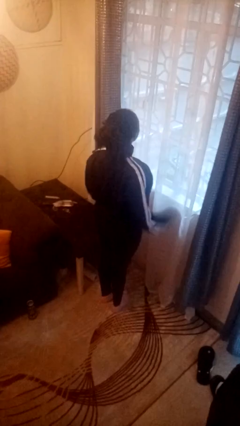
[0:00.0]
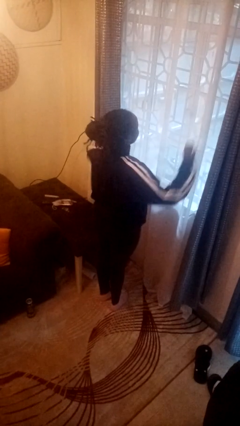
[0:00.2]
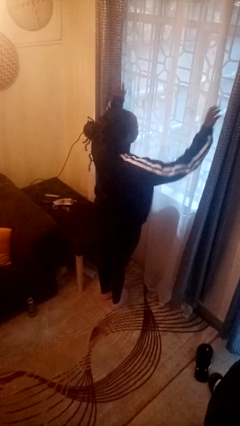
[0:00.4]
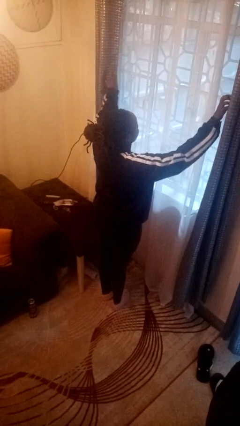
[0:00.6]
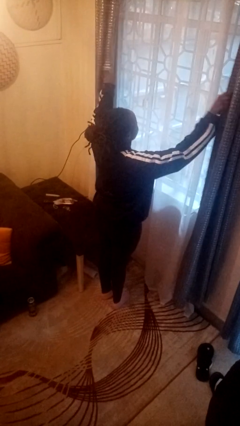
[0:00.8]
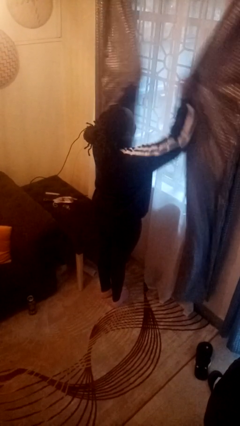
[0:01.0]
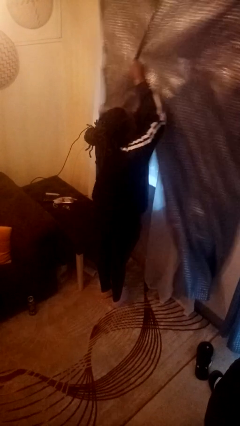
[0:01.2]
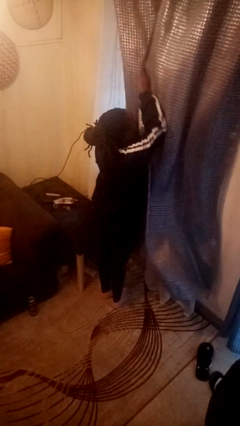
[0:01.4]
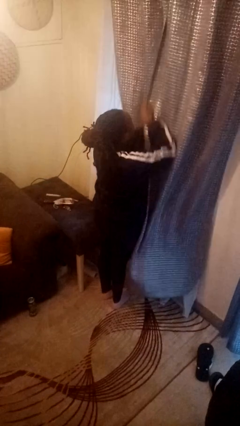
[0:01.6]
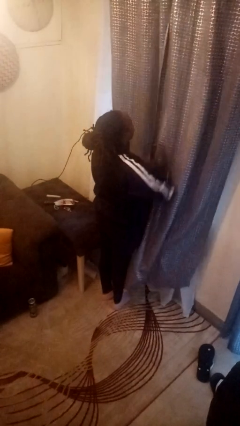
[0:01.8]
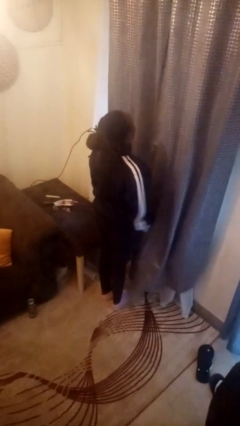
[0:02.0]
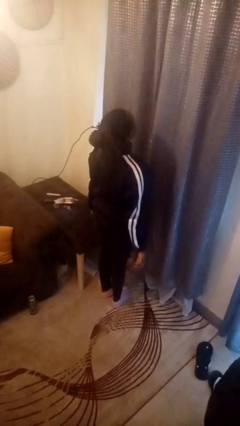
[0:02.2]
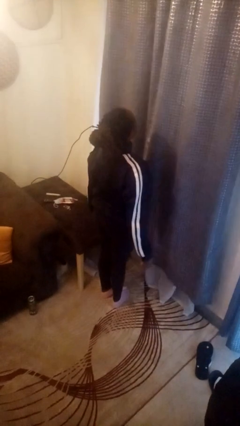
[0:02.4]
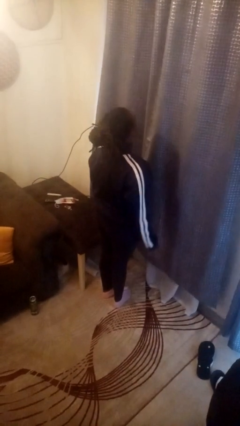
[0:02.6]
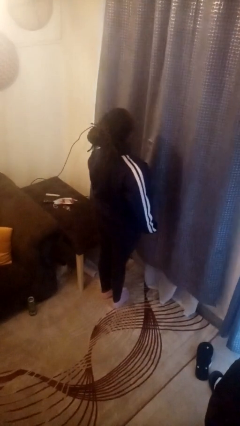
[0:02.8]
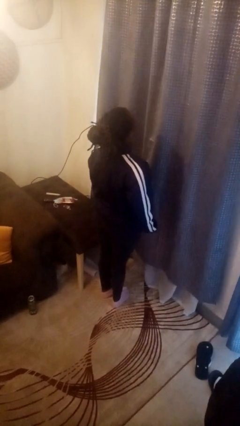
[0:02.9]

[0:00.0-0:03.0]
person closes curtains

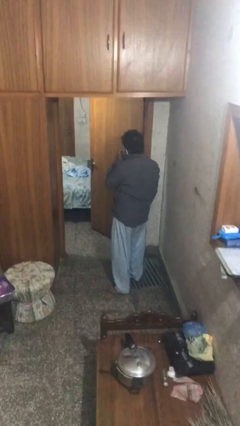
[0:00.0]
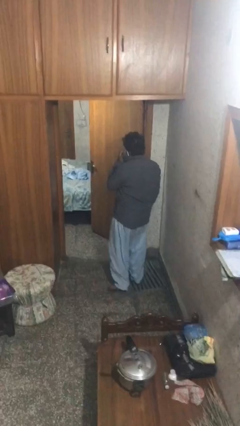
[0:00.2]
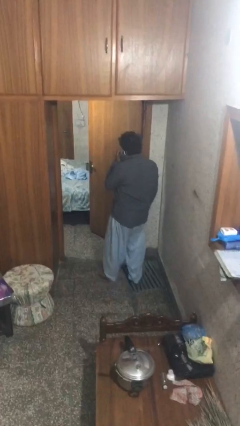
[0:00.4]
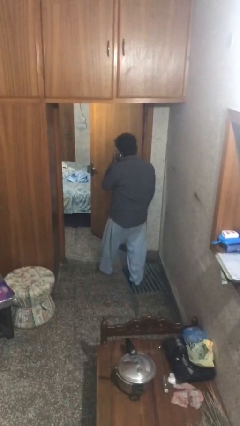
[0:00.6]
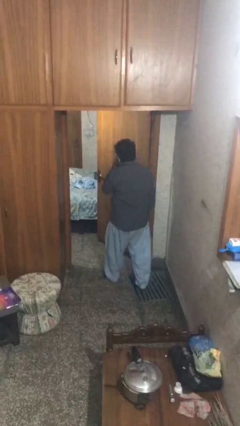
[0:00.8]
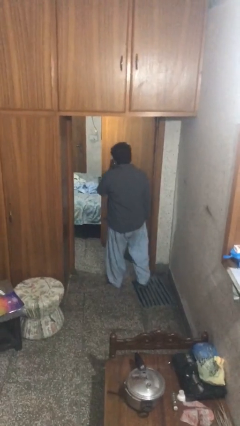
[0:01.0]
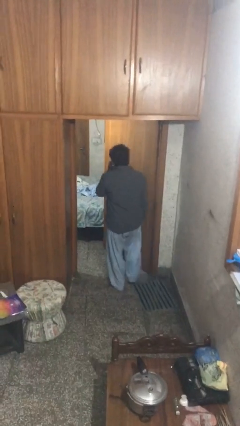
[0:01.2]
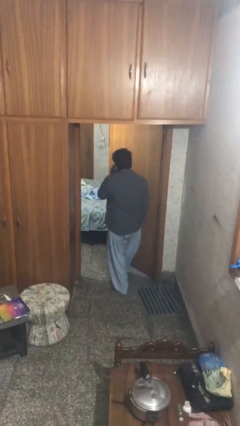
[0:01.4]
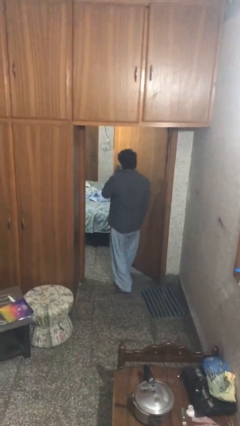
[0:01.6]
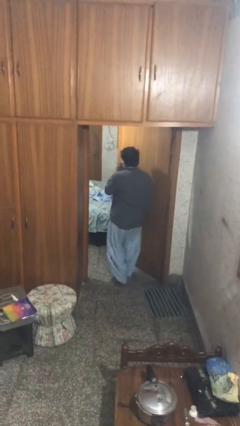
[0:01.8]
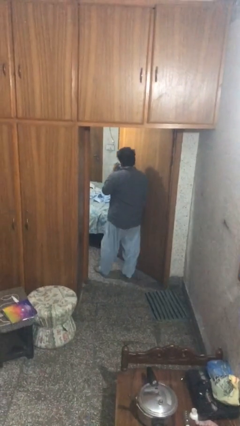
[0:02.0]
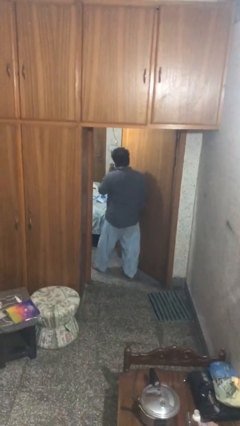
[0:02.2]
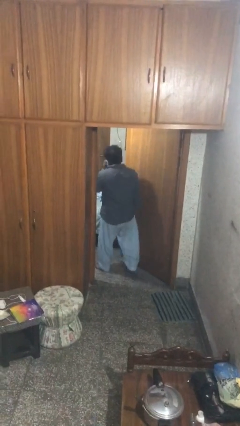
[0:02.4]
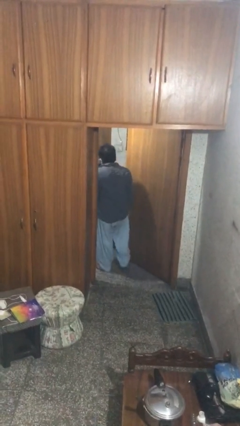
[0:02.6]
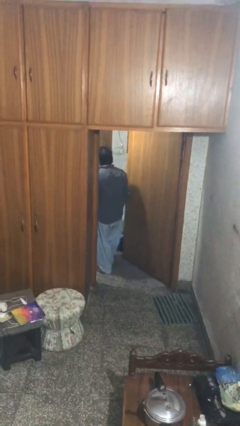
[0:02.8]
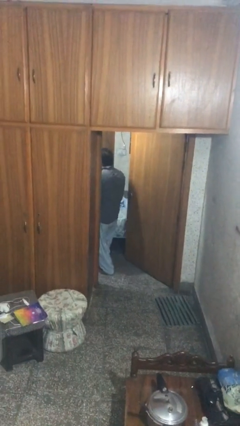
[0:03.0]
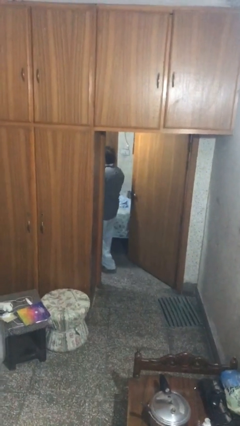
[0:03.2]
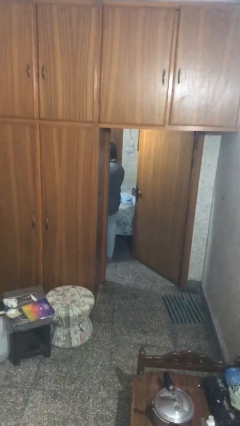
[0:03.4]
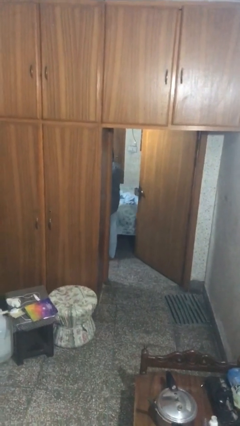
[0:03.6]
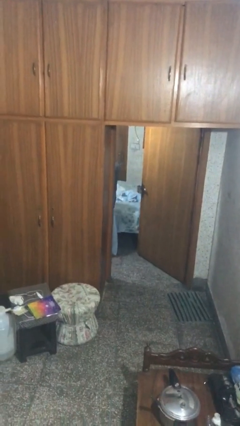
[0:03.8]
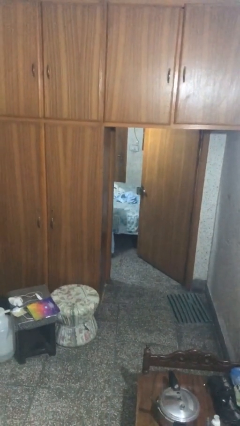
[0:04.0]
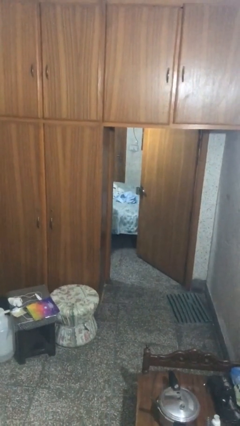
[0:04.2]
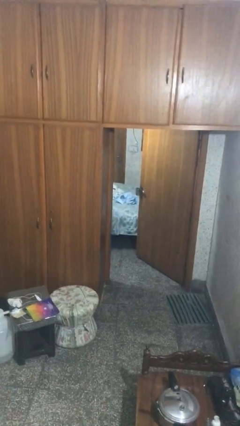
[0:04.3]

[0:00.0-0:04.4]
person exits scene through structure

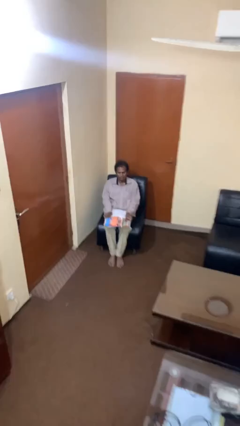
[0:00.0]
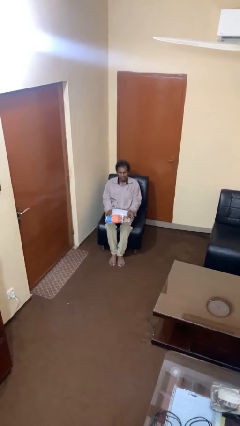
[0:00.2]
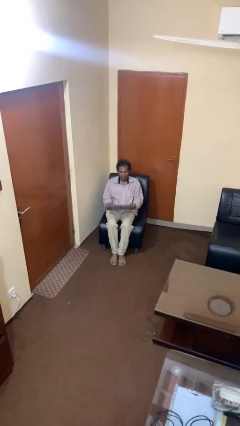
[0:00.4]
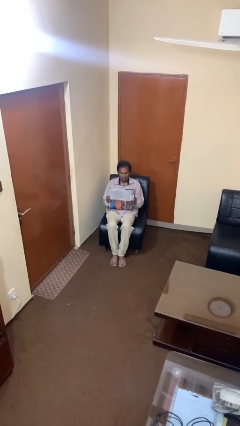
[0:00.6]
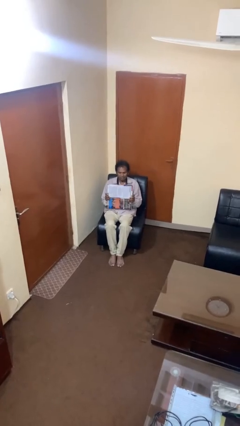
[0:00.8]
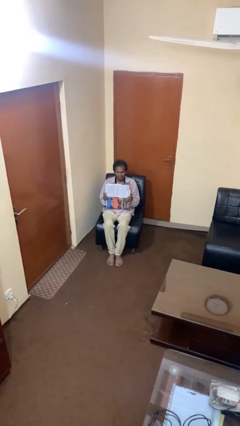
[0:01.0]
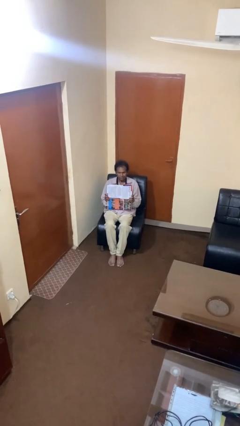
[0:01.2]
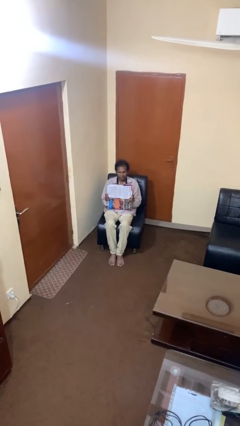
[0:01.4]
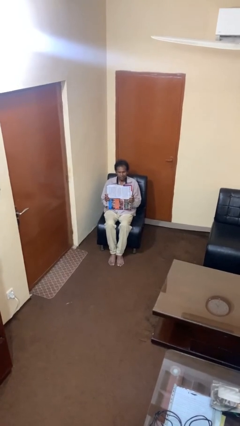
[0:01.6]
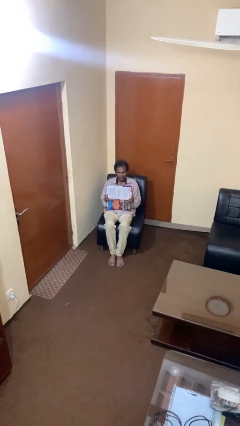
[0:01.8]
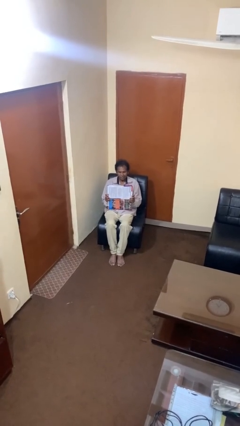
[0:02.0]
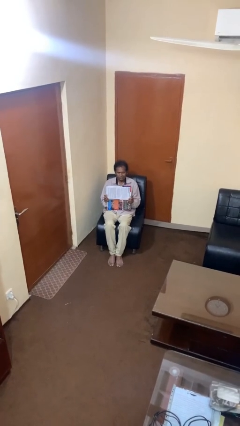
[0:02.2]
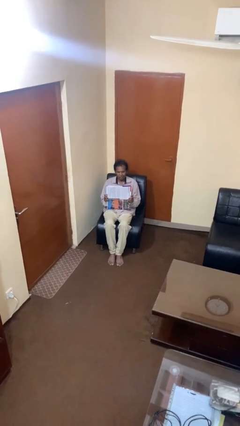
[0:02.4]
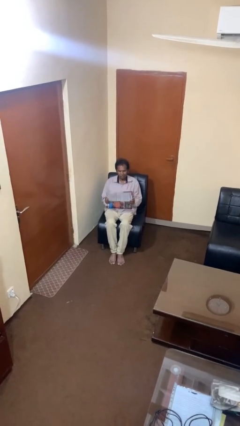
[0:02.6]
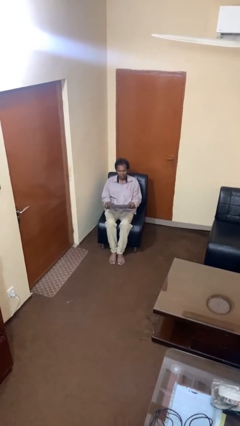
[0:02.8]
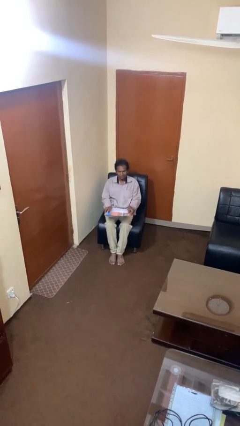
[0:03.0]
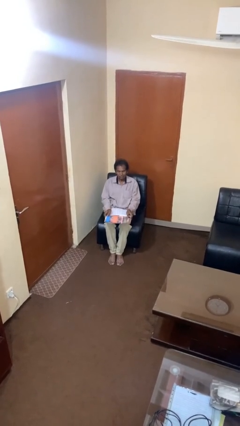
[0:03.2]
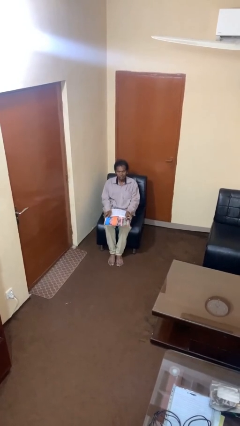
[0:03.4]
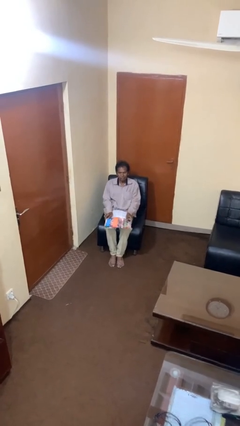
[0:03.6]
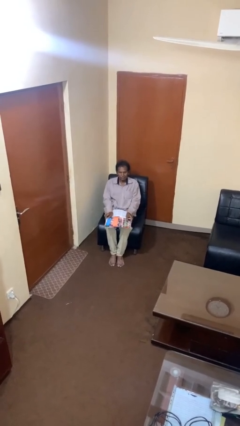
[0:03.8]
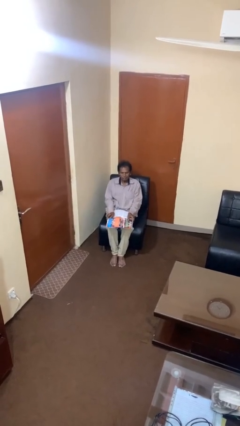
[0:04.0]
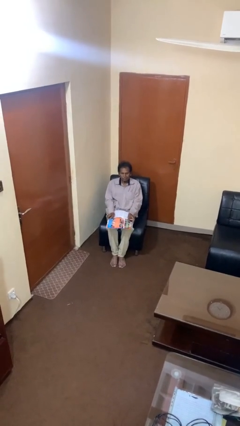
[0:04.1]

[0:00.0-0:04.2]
person reads newspaper

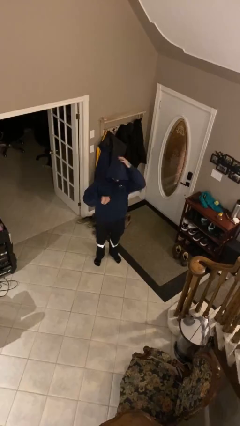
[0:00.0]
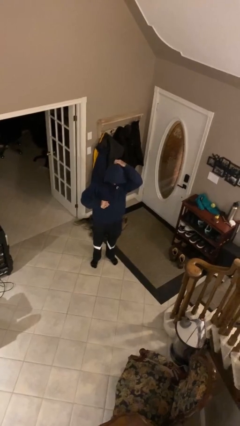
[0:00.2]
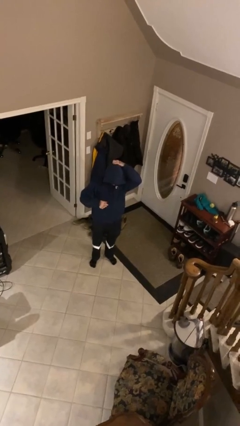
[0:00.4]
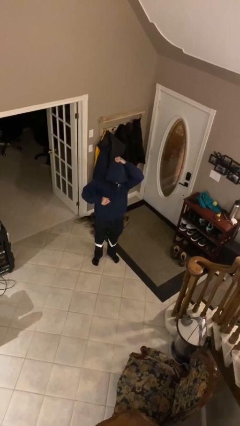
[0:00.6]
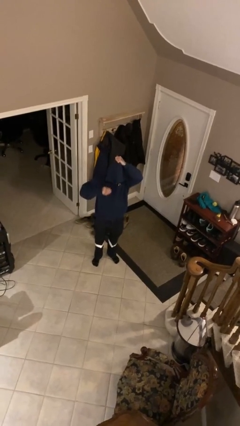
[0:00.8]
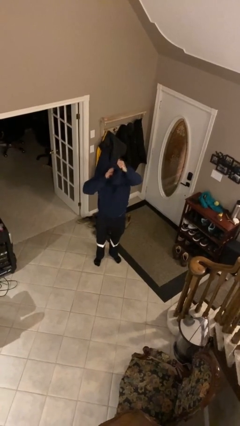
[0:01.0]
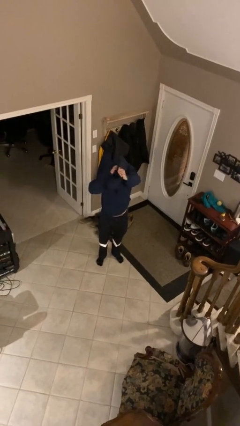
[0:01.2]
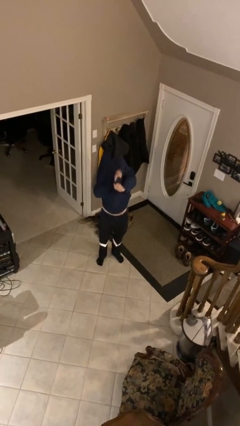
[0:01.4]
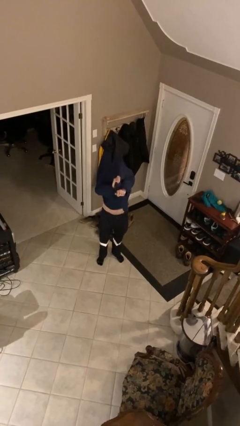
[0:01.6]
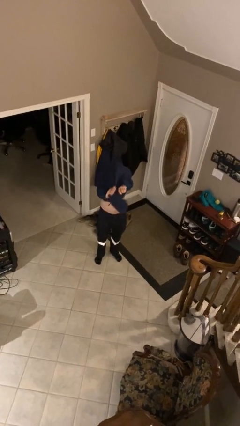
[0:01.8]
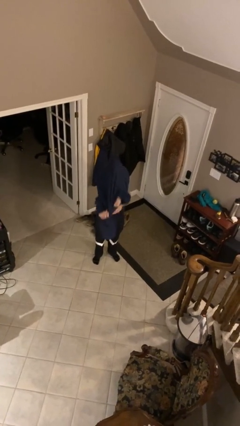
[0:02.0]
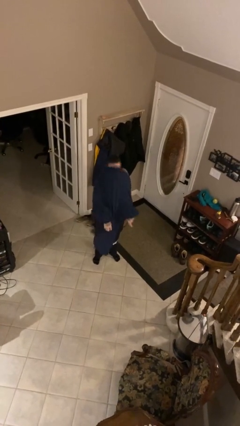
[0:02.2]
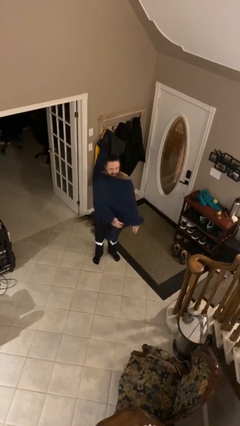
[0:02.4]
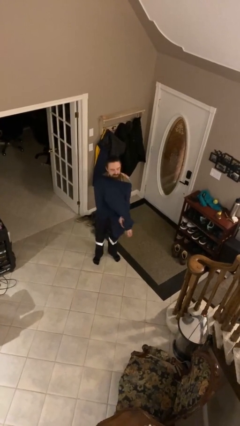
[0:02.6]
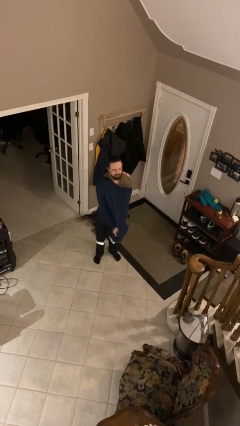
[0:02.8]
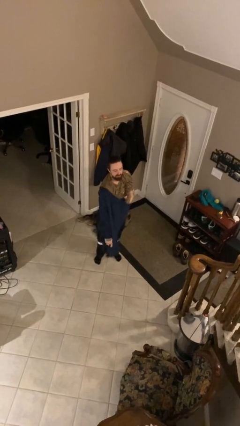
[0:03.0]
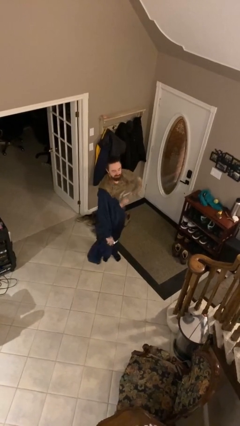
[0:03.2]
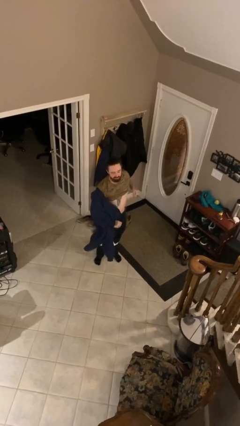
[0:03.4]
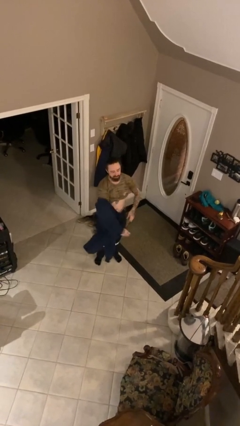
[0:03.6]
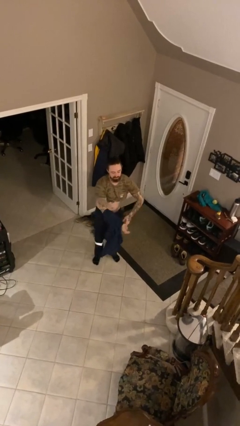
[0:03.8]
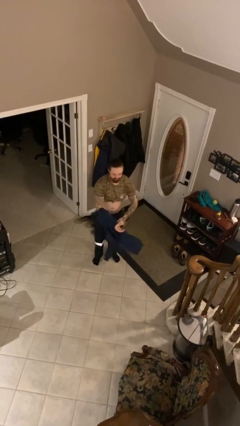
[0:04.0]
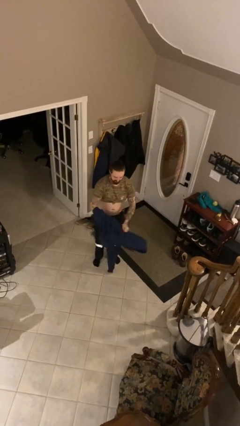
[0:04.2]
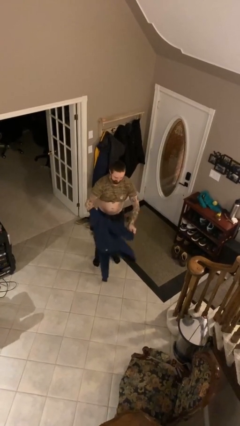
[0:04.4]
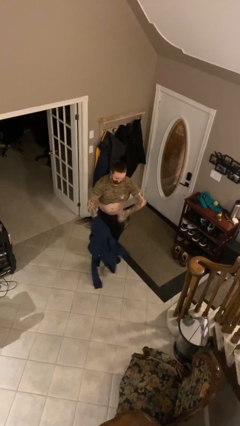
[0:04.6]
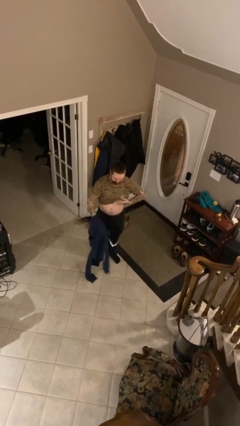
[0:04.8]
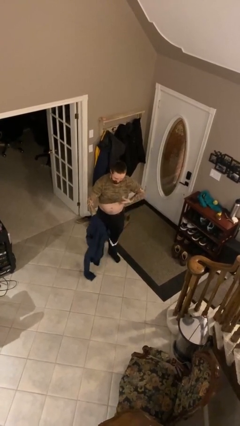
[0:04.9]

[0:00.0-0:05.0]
person takes off hoodie

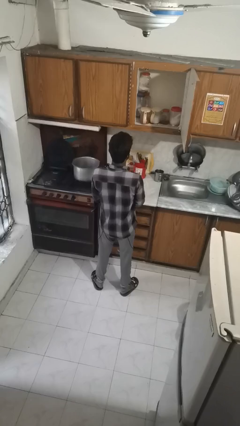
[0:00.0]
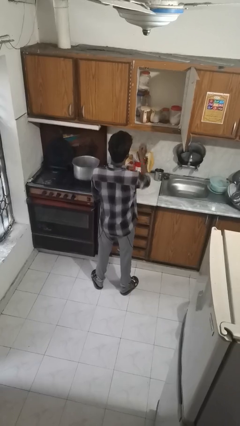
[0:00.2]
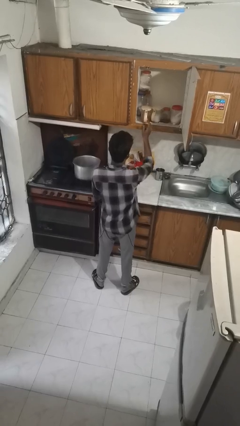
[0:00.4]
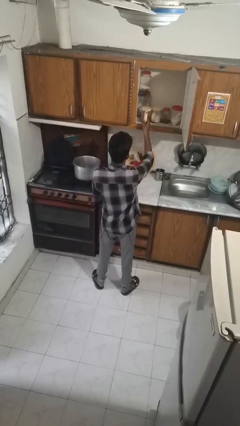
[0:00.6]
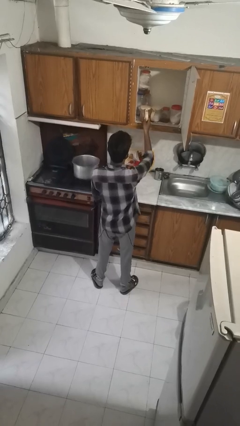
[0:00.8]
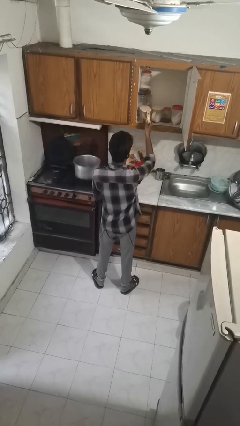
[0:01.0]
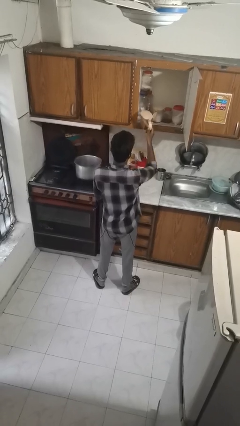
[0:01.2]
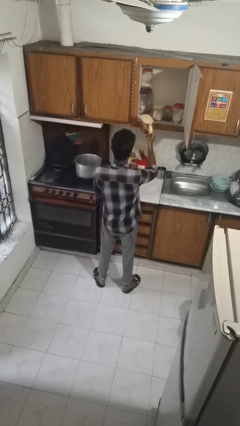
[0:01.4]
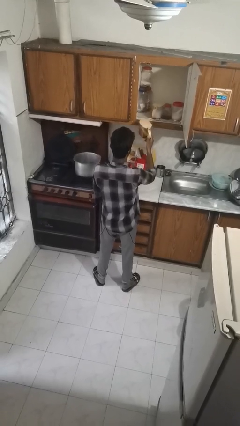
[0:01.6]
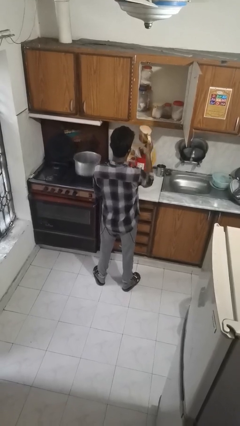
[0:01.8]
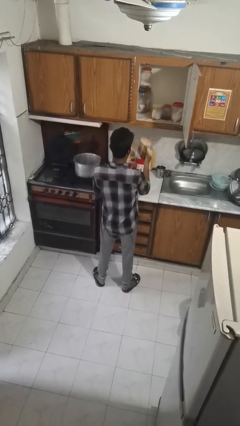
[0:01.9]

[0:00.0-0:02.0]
person picks up object from cabinet
